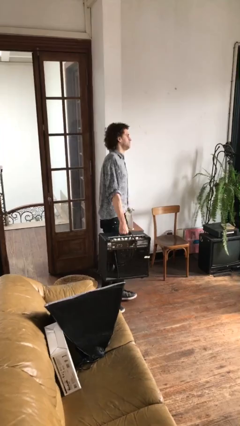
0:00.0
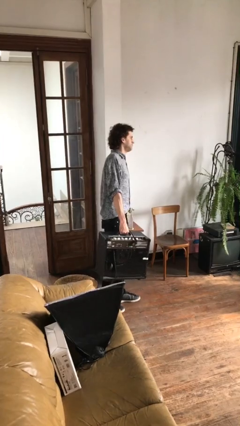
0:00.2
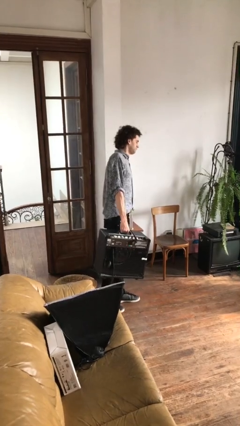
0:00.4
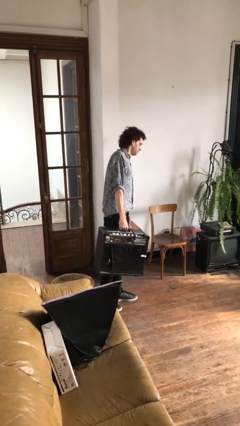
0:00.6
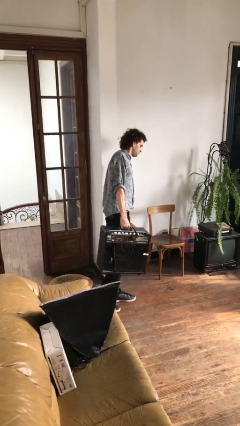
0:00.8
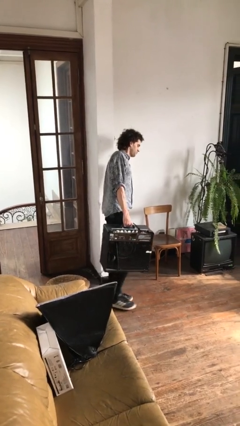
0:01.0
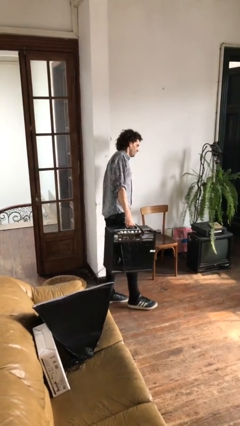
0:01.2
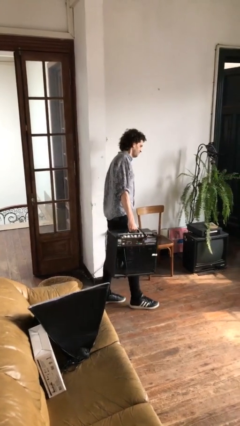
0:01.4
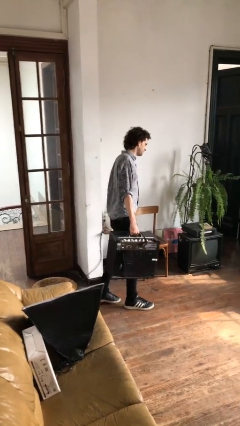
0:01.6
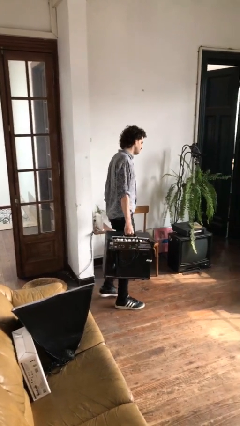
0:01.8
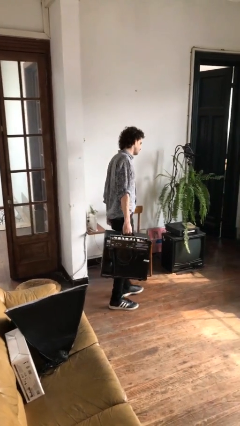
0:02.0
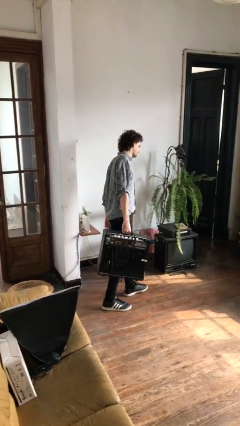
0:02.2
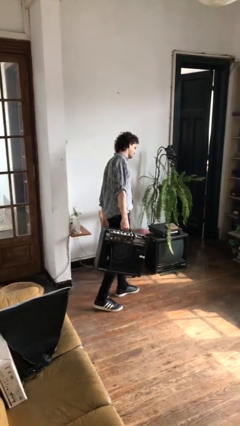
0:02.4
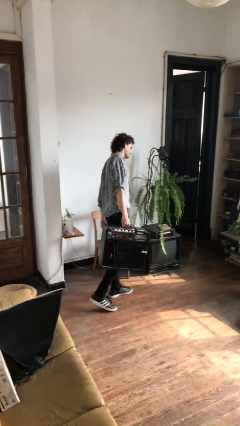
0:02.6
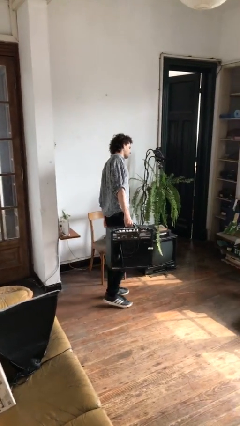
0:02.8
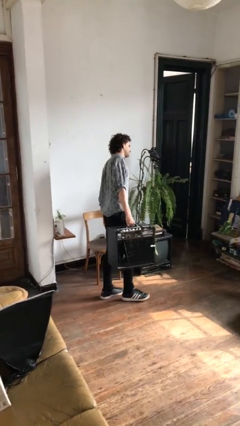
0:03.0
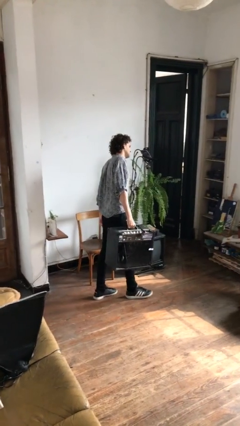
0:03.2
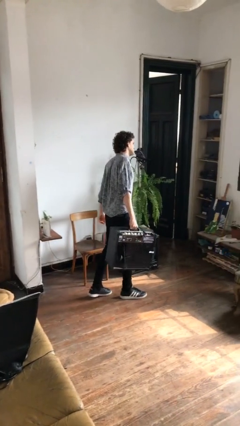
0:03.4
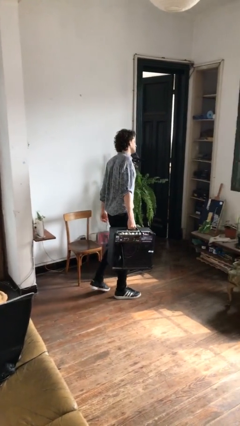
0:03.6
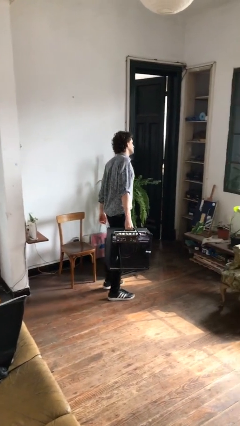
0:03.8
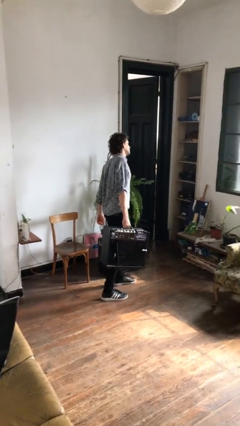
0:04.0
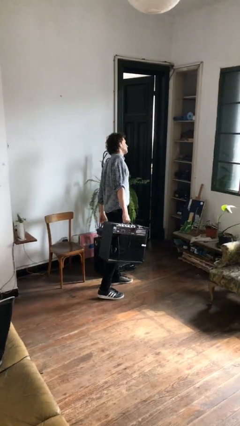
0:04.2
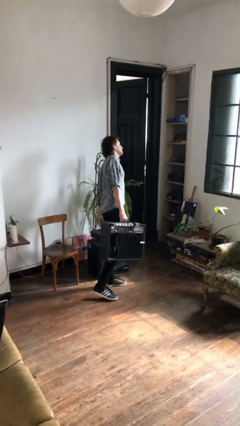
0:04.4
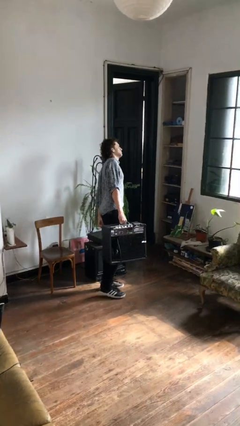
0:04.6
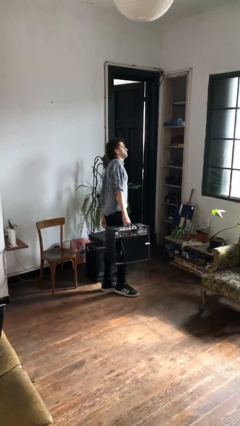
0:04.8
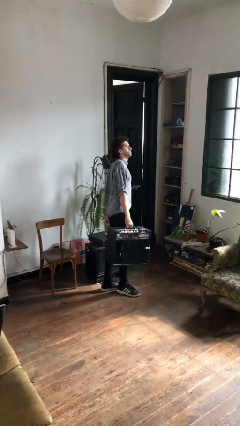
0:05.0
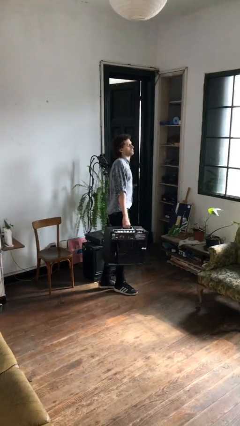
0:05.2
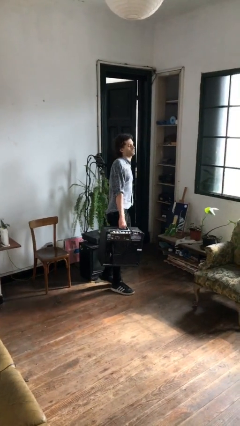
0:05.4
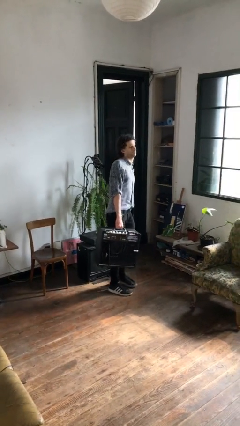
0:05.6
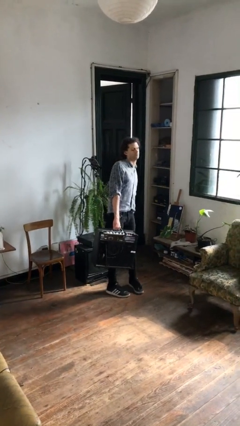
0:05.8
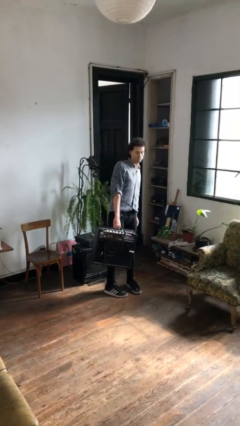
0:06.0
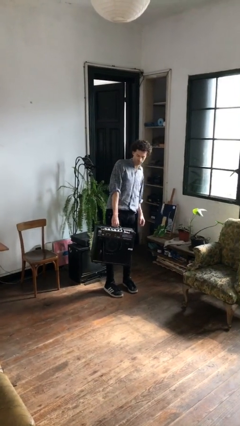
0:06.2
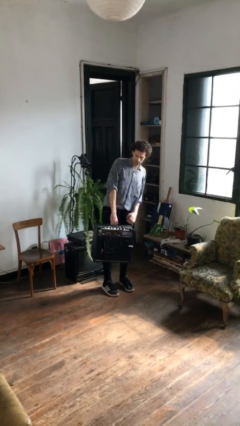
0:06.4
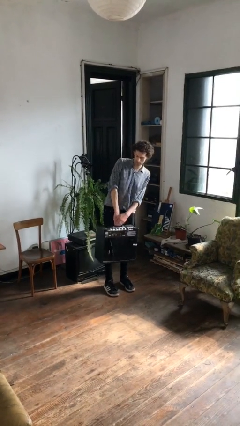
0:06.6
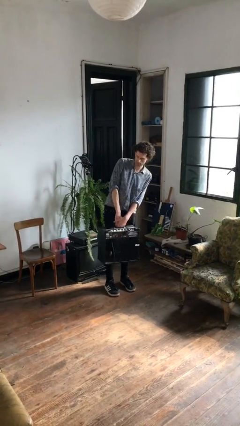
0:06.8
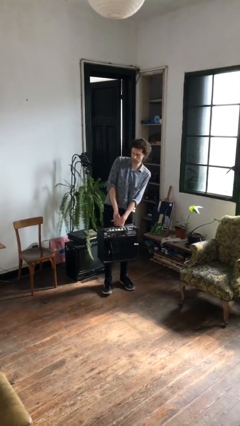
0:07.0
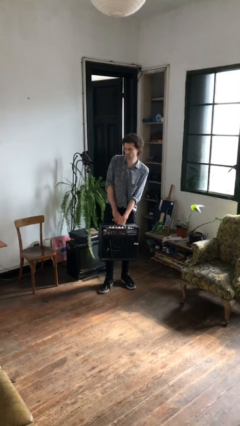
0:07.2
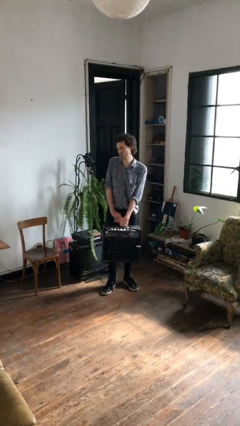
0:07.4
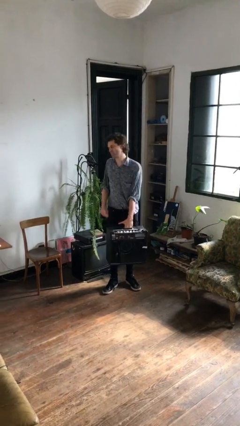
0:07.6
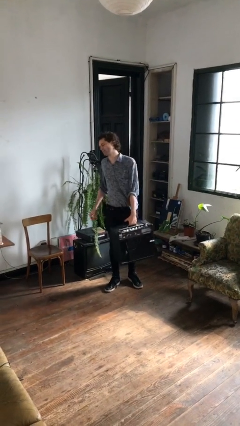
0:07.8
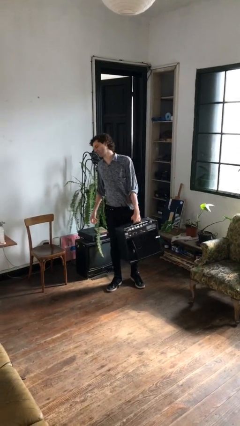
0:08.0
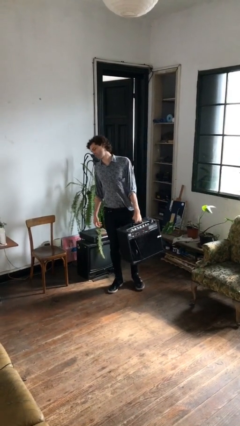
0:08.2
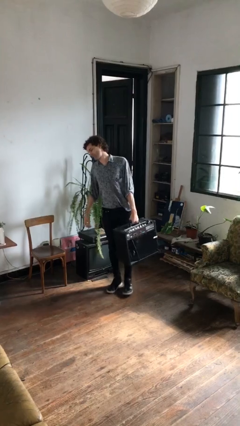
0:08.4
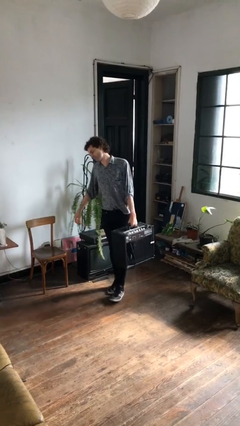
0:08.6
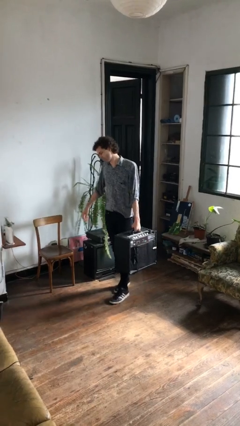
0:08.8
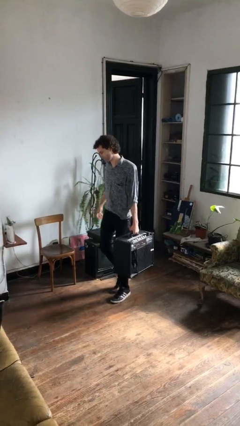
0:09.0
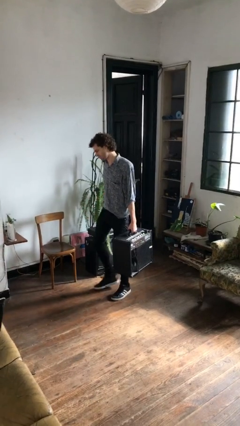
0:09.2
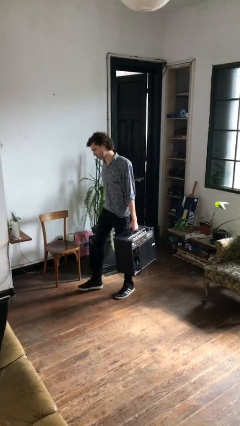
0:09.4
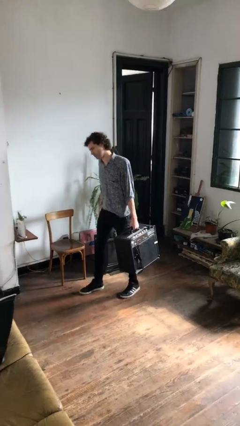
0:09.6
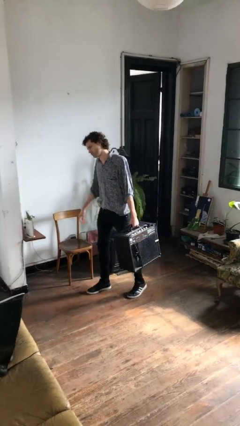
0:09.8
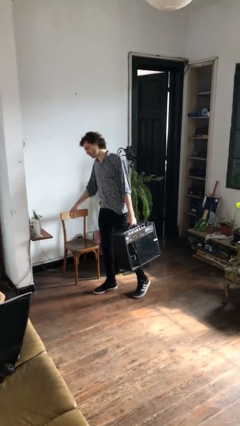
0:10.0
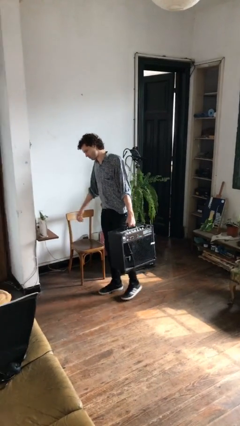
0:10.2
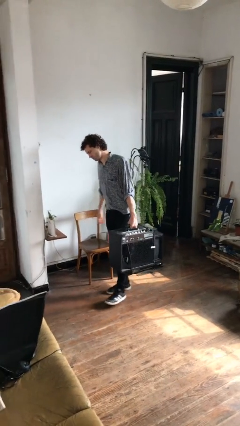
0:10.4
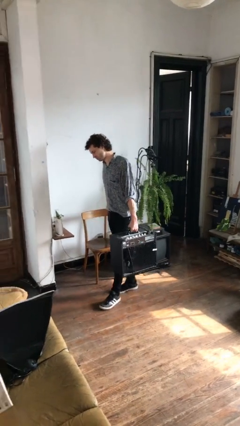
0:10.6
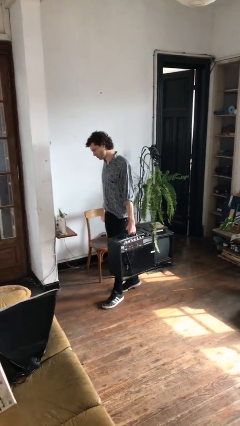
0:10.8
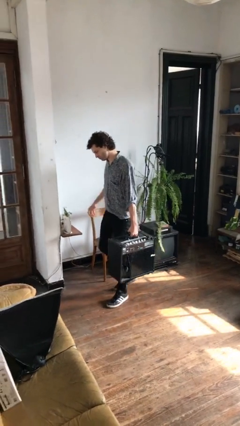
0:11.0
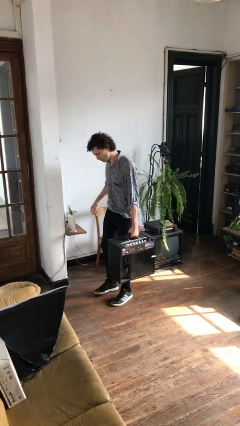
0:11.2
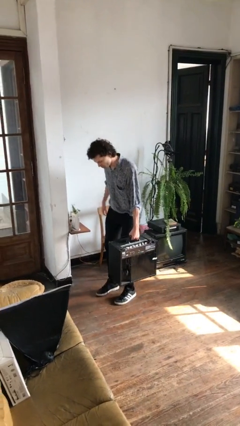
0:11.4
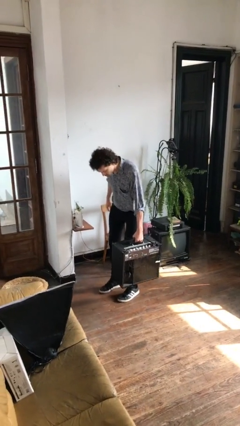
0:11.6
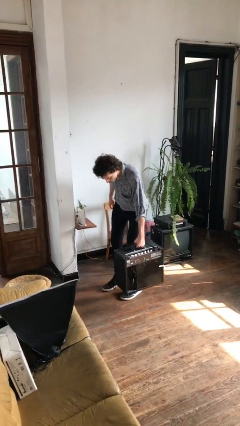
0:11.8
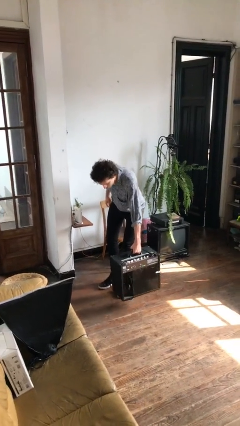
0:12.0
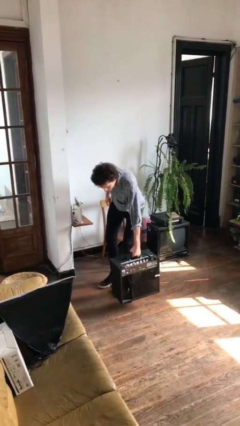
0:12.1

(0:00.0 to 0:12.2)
person carries heavy object

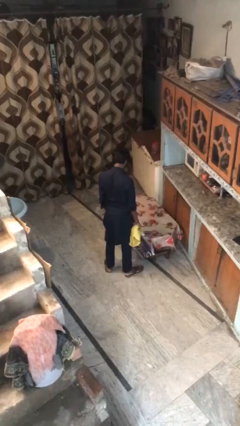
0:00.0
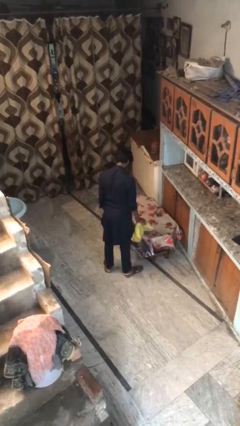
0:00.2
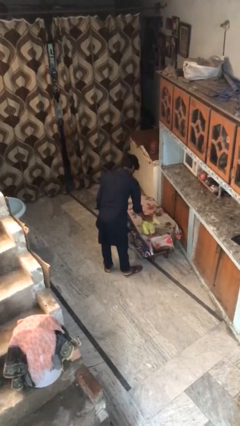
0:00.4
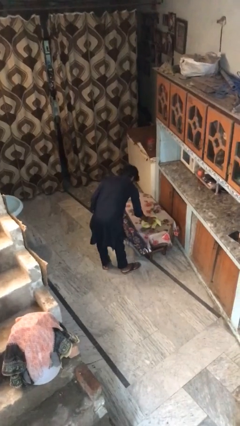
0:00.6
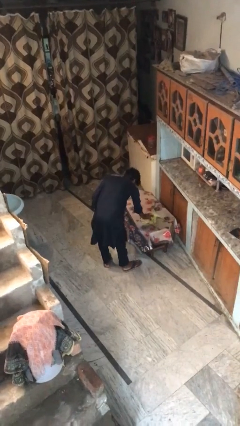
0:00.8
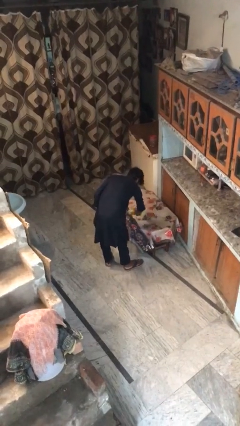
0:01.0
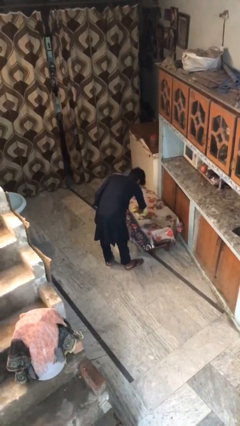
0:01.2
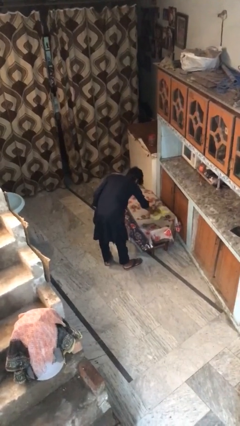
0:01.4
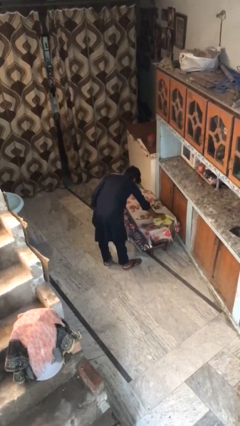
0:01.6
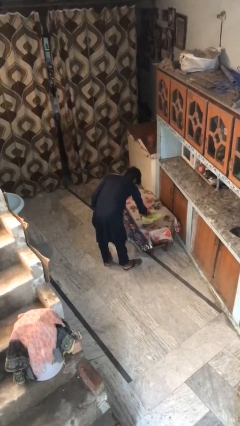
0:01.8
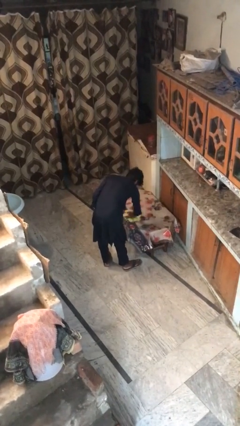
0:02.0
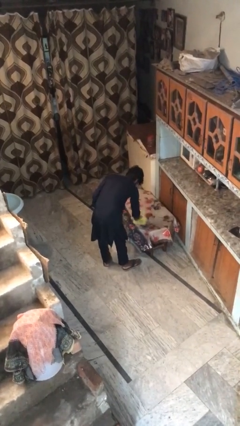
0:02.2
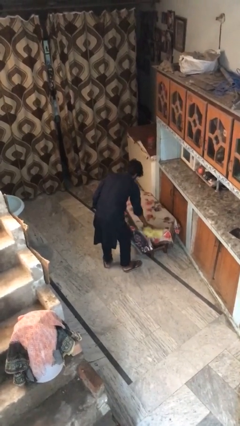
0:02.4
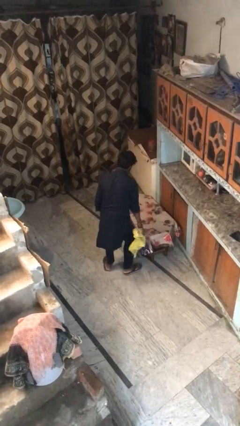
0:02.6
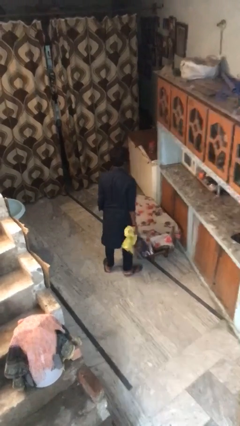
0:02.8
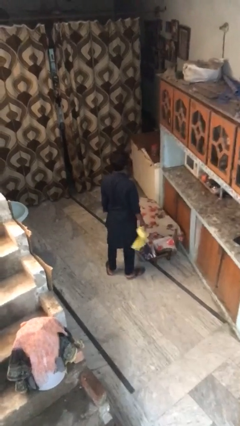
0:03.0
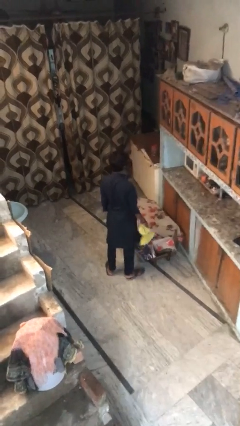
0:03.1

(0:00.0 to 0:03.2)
person cleans table with rag

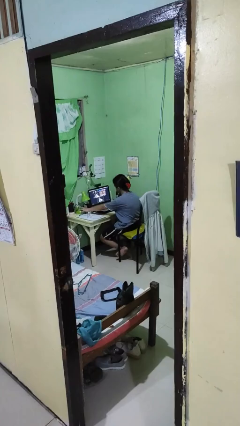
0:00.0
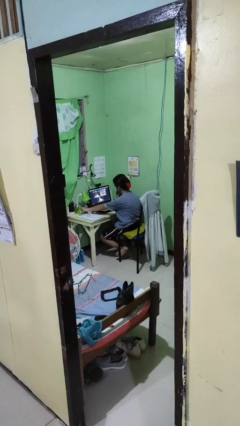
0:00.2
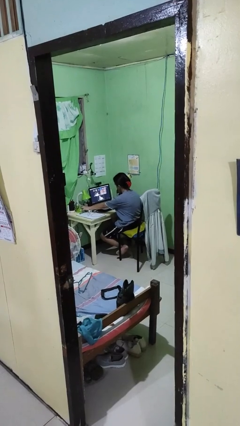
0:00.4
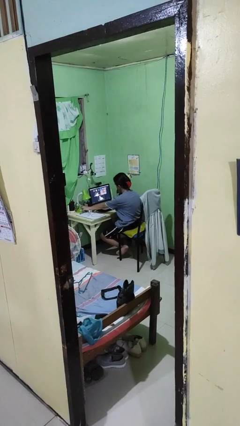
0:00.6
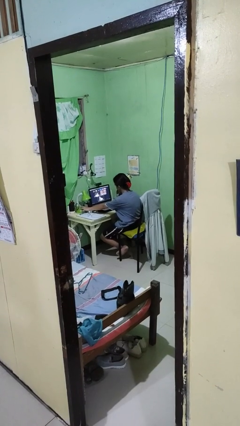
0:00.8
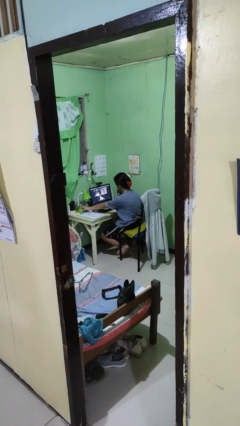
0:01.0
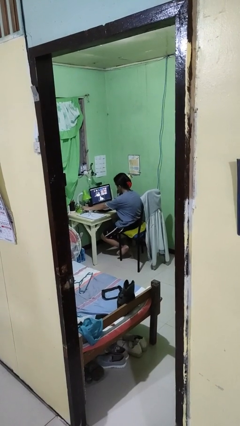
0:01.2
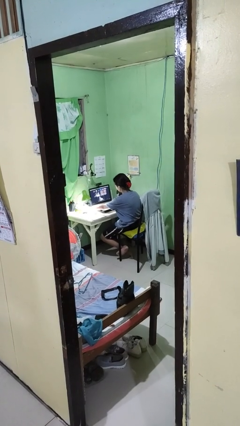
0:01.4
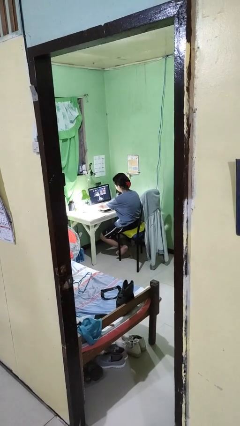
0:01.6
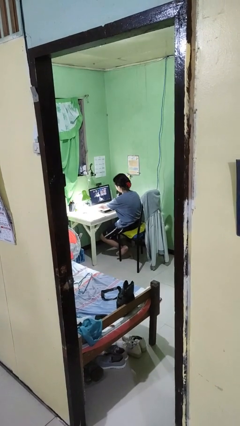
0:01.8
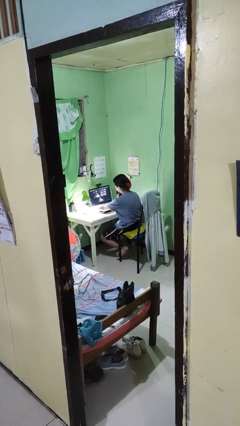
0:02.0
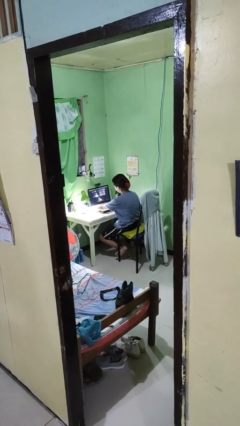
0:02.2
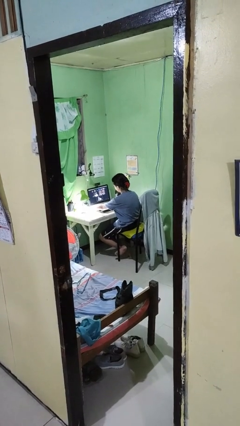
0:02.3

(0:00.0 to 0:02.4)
person turns on lamp

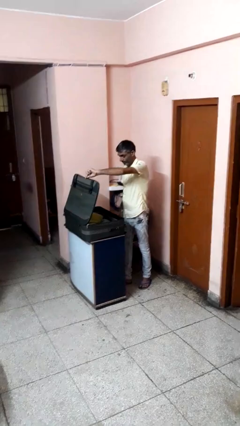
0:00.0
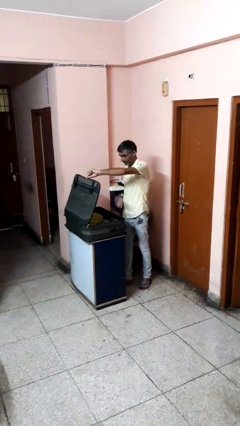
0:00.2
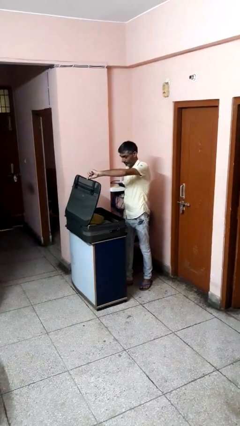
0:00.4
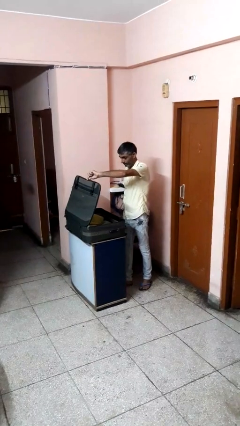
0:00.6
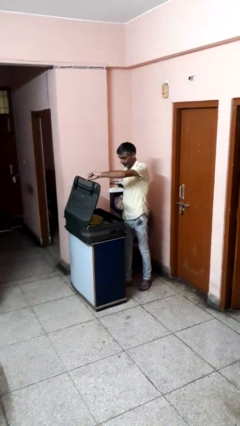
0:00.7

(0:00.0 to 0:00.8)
person opens suitcase
